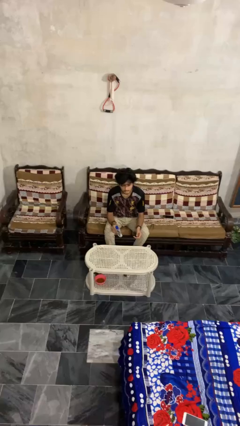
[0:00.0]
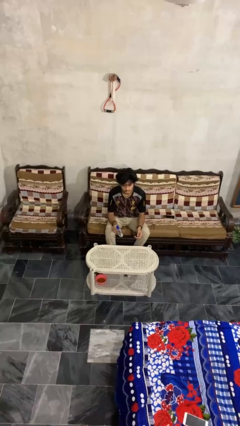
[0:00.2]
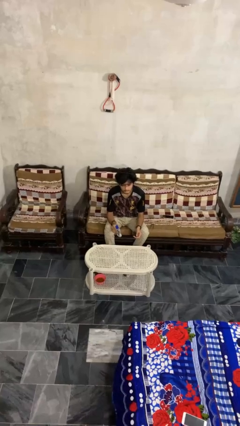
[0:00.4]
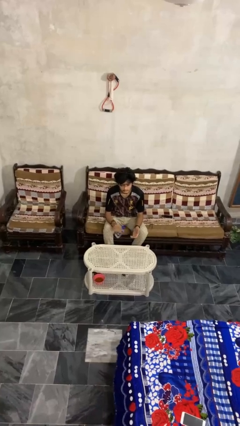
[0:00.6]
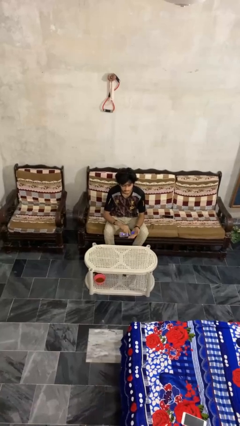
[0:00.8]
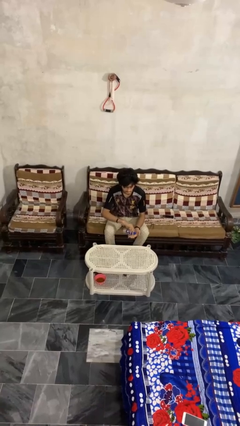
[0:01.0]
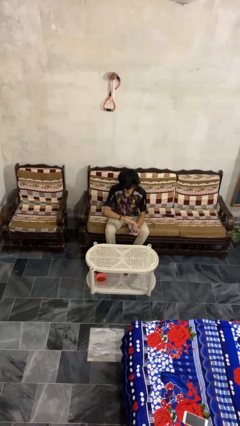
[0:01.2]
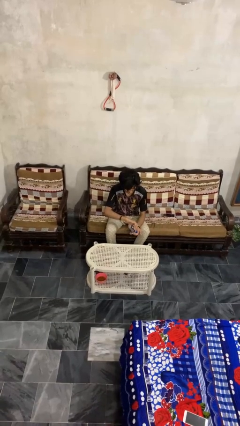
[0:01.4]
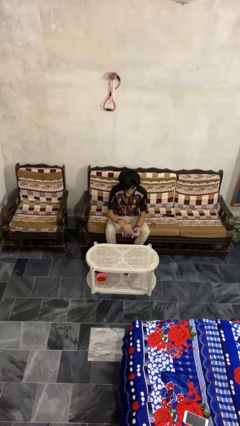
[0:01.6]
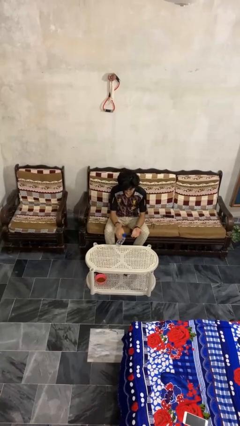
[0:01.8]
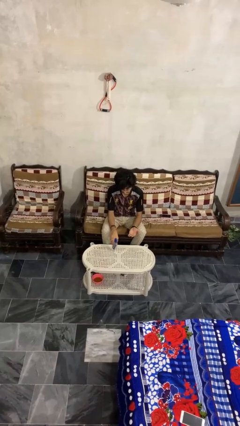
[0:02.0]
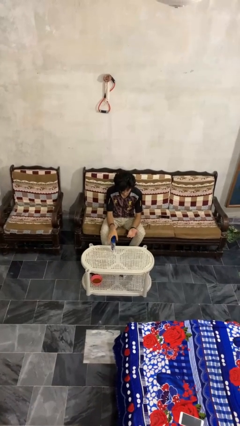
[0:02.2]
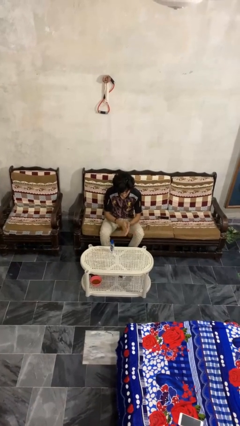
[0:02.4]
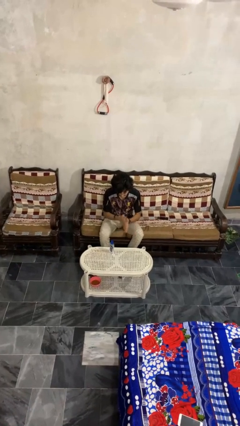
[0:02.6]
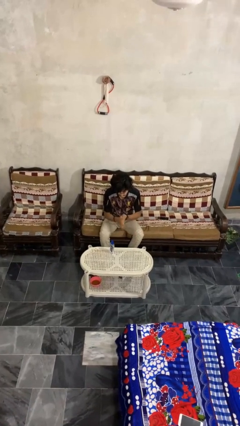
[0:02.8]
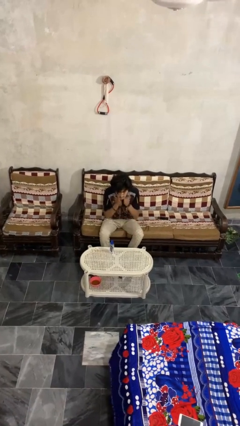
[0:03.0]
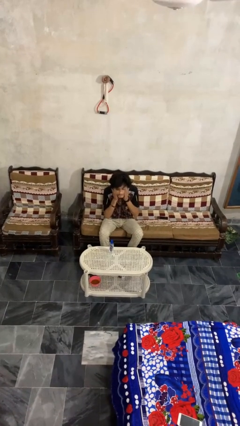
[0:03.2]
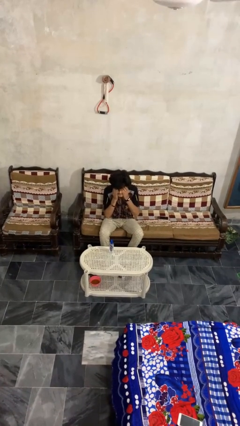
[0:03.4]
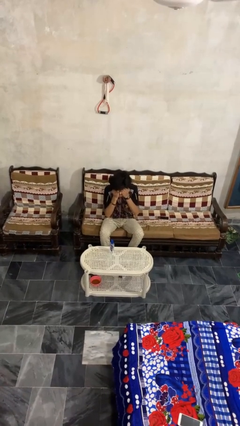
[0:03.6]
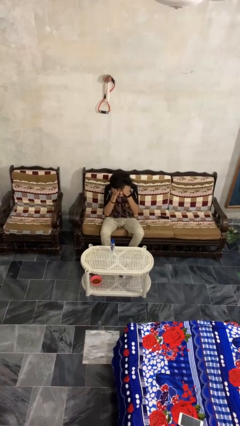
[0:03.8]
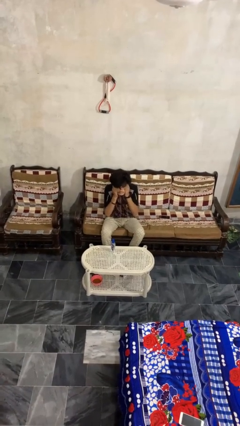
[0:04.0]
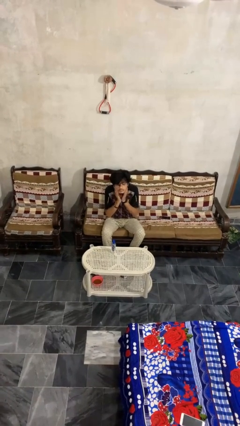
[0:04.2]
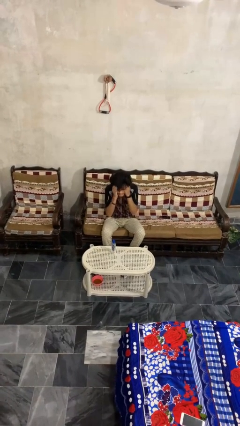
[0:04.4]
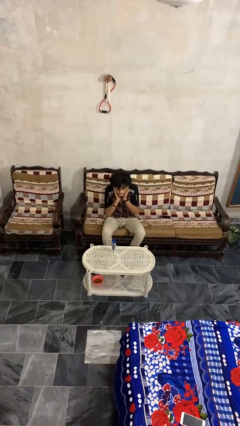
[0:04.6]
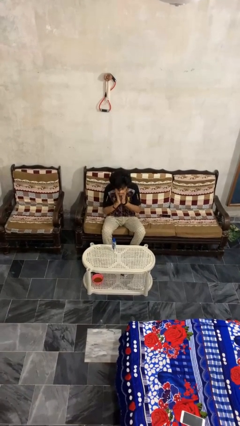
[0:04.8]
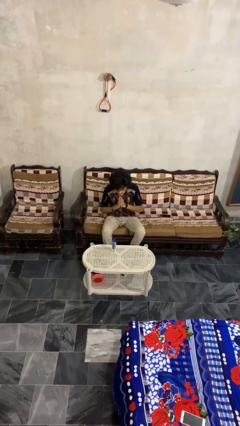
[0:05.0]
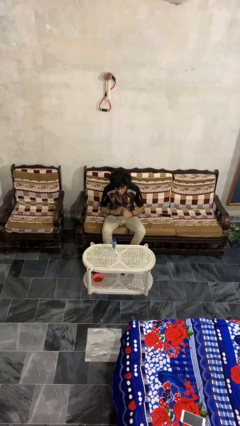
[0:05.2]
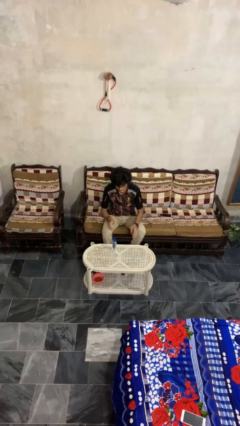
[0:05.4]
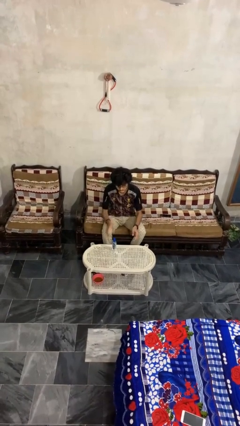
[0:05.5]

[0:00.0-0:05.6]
person applies facial moisturizer

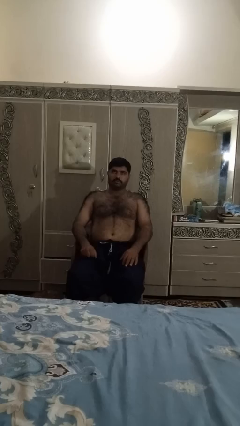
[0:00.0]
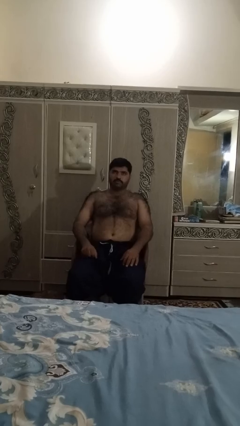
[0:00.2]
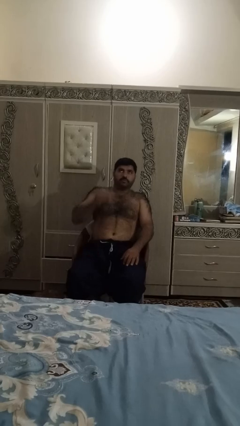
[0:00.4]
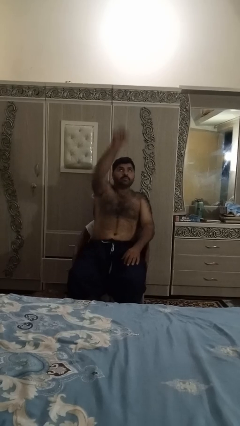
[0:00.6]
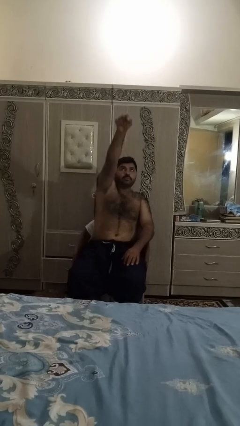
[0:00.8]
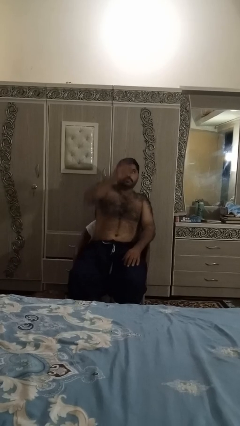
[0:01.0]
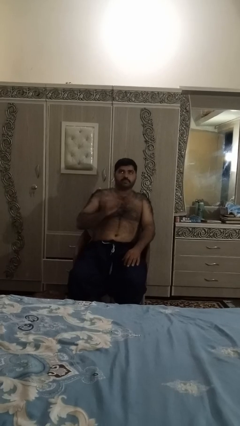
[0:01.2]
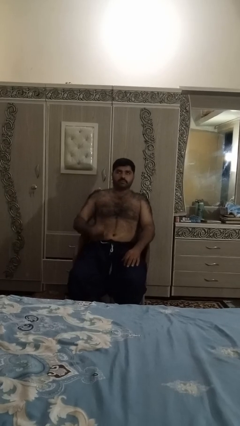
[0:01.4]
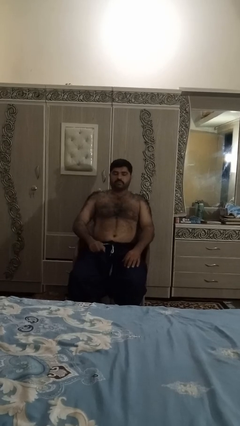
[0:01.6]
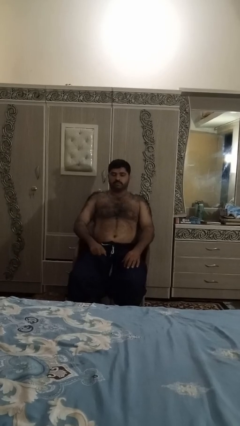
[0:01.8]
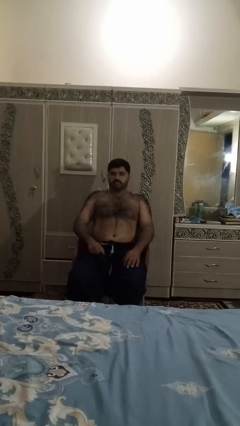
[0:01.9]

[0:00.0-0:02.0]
person punches

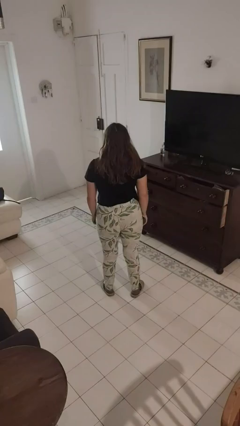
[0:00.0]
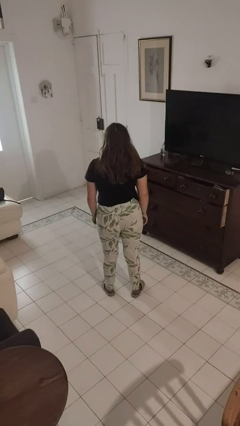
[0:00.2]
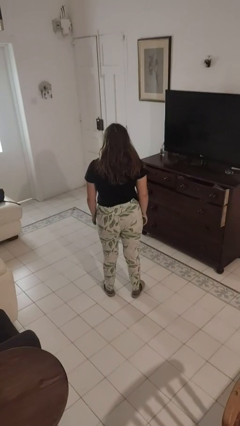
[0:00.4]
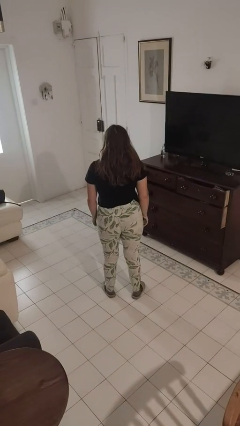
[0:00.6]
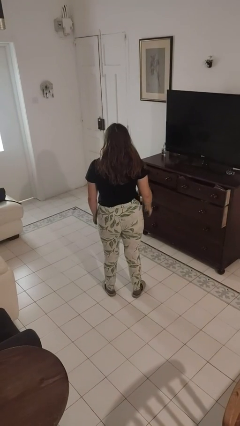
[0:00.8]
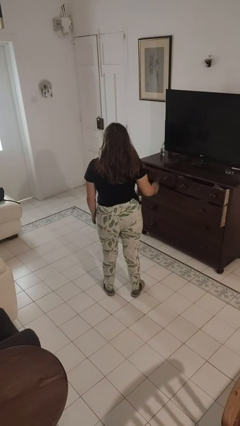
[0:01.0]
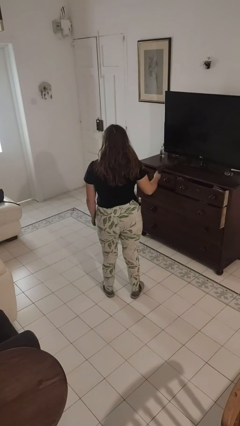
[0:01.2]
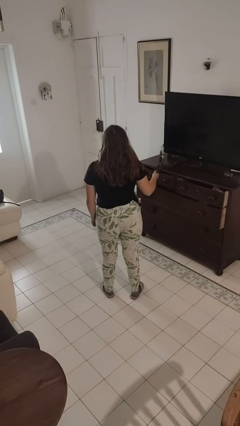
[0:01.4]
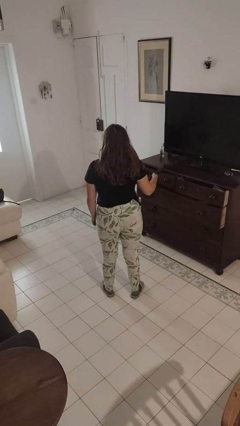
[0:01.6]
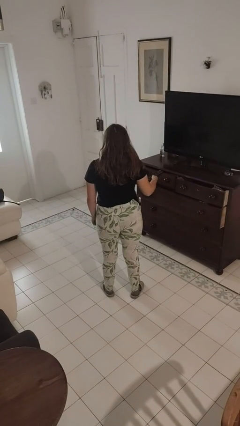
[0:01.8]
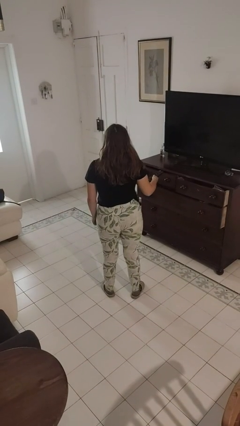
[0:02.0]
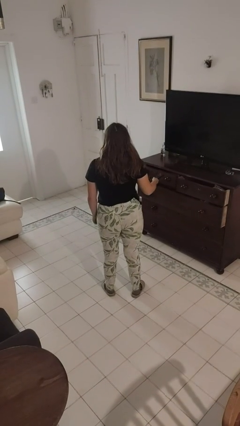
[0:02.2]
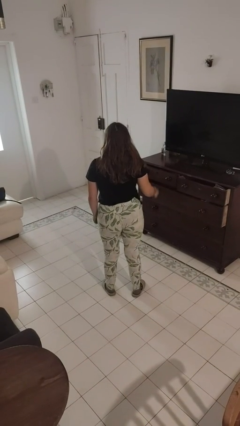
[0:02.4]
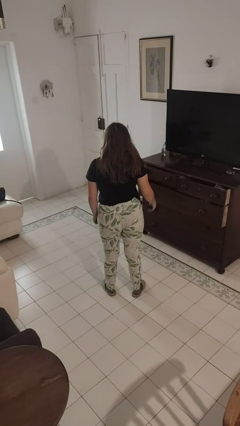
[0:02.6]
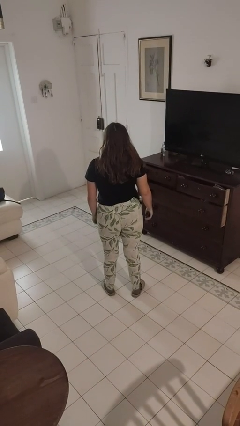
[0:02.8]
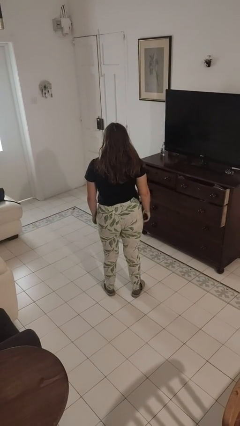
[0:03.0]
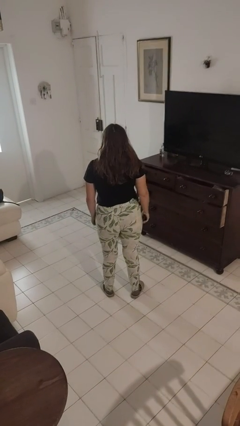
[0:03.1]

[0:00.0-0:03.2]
person uses television remote

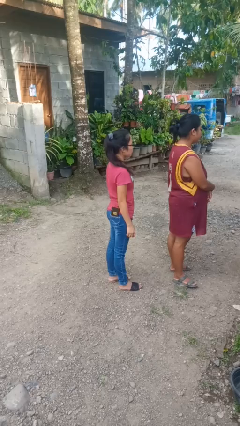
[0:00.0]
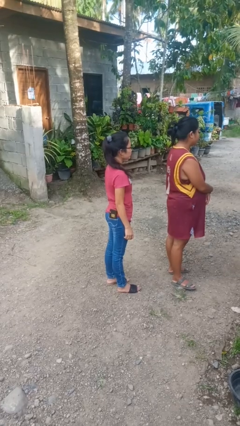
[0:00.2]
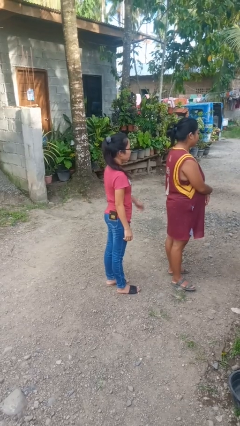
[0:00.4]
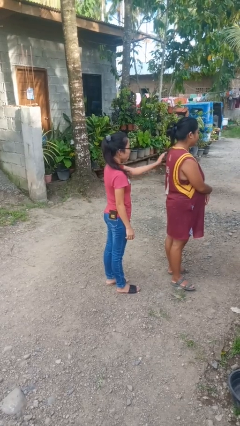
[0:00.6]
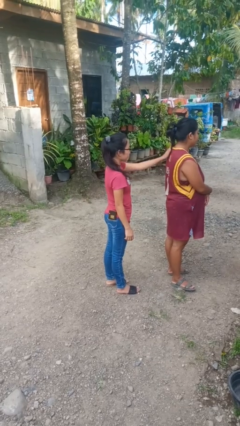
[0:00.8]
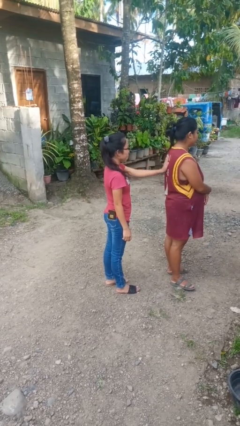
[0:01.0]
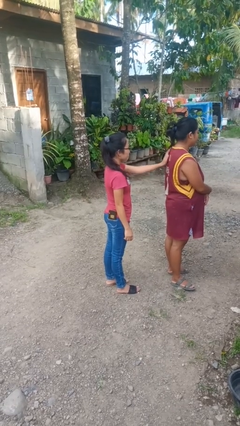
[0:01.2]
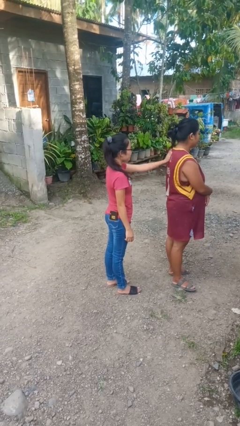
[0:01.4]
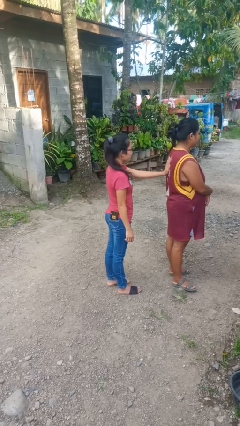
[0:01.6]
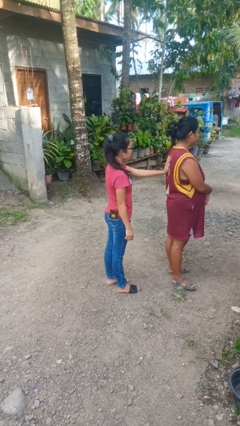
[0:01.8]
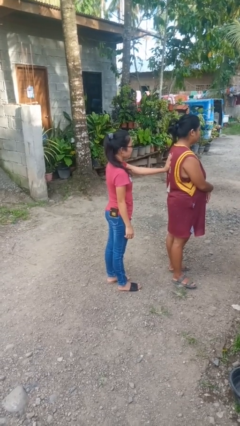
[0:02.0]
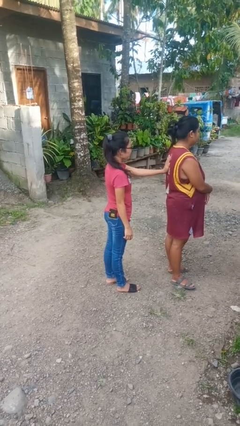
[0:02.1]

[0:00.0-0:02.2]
person touches back of person

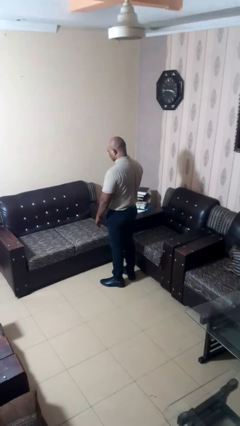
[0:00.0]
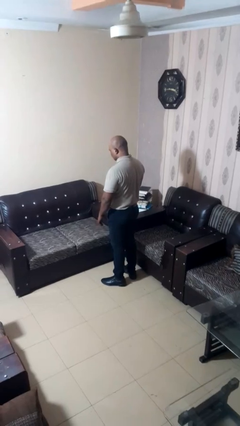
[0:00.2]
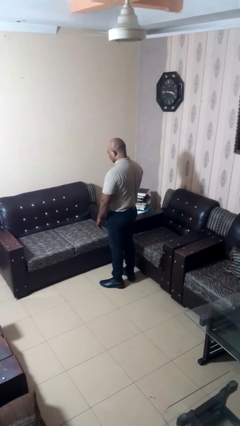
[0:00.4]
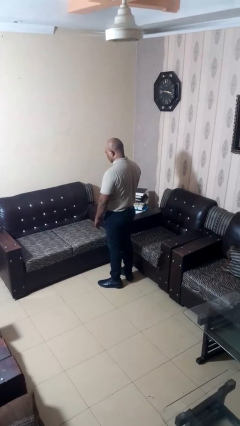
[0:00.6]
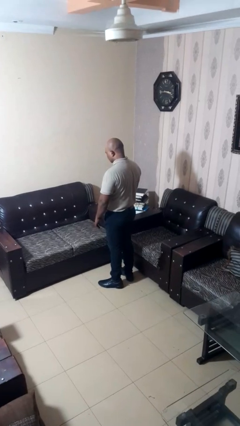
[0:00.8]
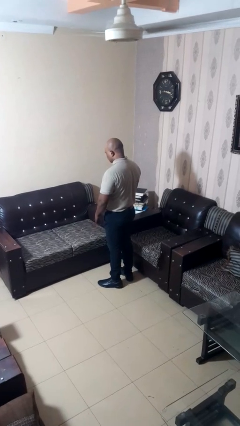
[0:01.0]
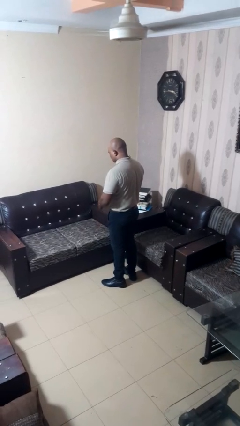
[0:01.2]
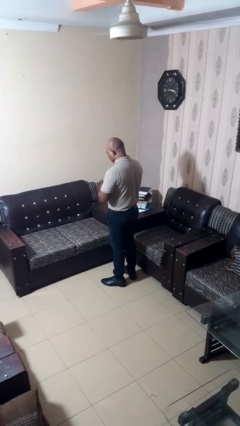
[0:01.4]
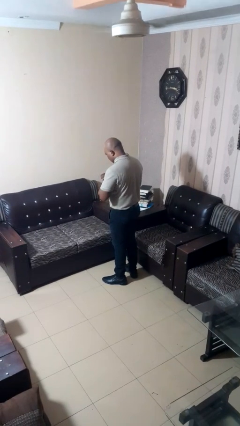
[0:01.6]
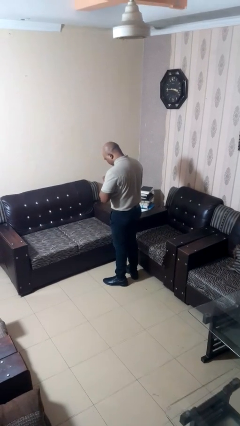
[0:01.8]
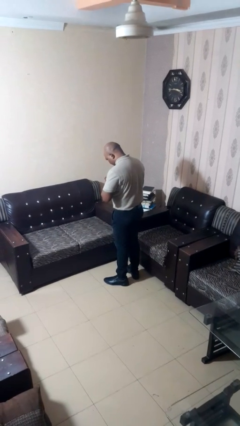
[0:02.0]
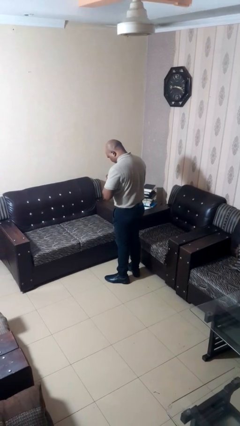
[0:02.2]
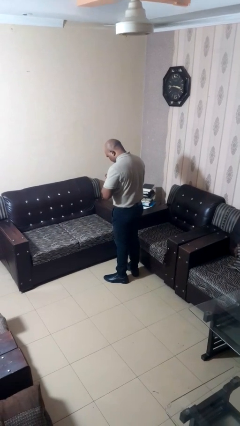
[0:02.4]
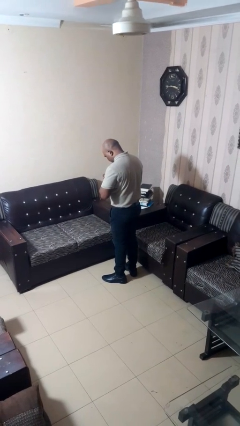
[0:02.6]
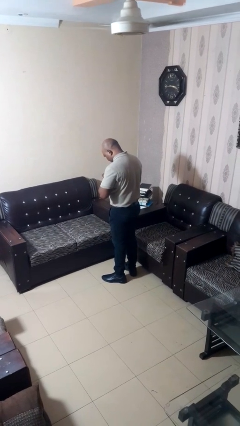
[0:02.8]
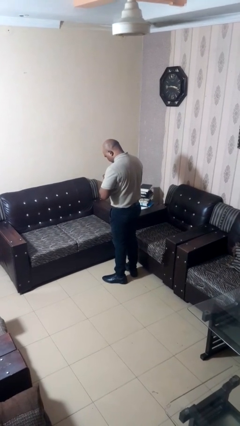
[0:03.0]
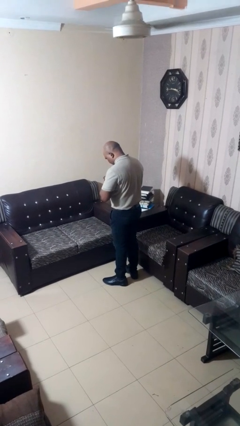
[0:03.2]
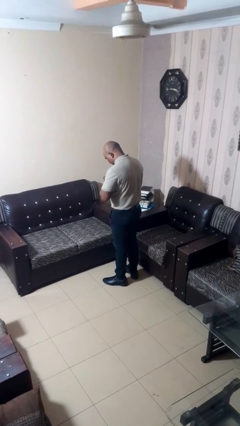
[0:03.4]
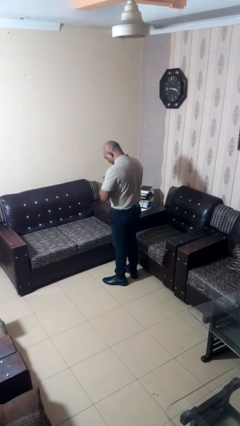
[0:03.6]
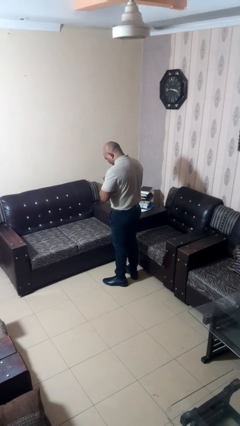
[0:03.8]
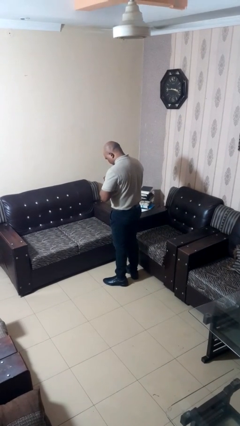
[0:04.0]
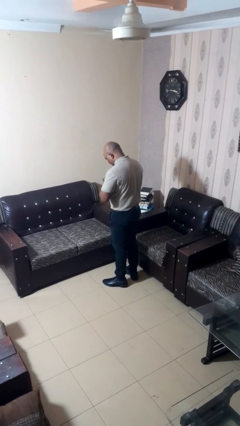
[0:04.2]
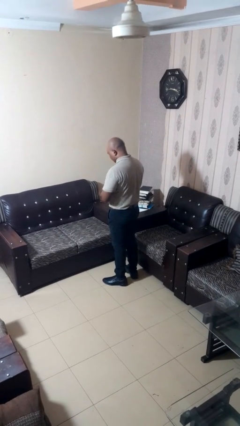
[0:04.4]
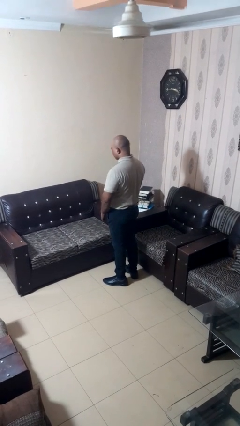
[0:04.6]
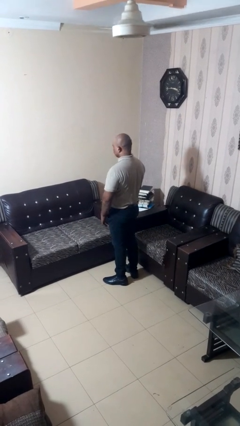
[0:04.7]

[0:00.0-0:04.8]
person prays
